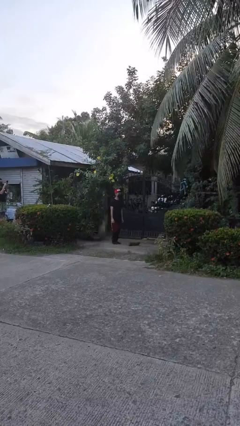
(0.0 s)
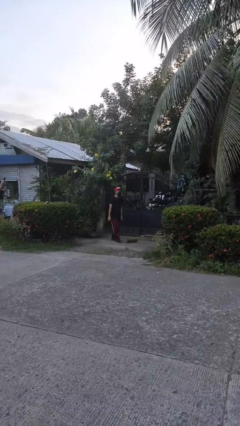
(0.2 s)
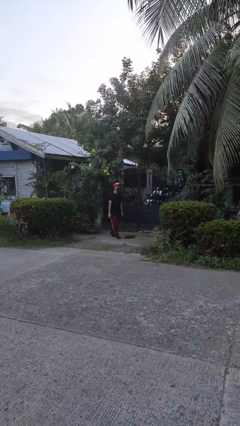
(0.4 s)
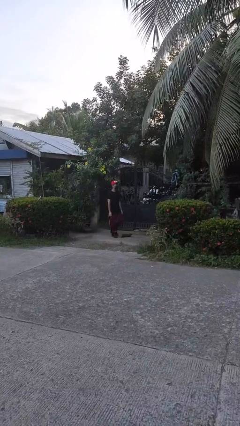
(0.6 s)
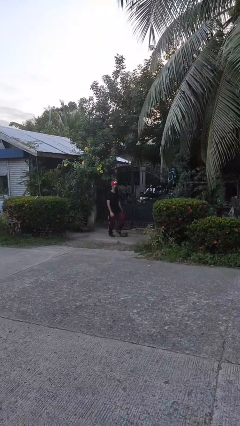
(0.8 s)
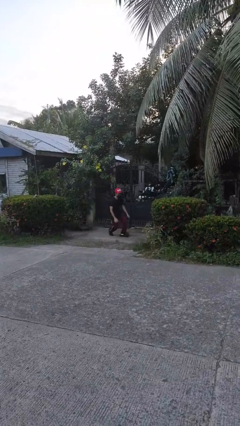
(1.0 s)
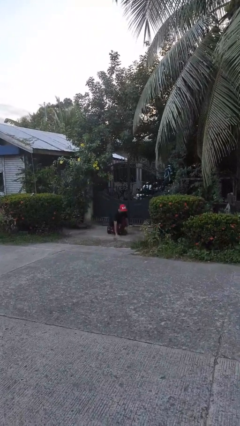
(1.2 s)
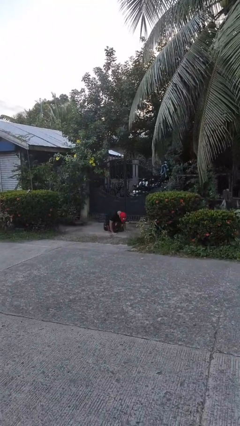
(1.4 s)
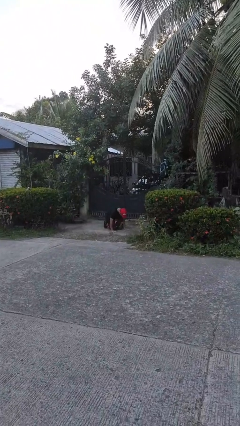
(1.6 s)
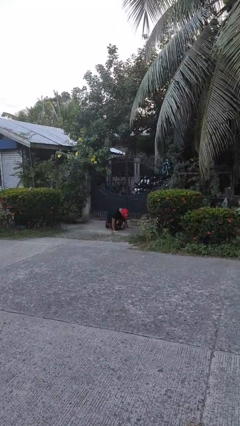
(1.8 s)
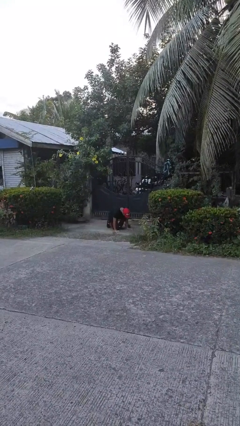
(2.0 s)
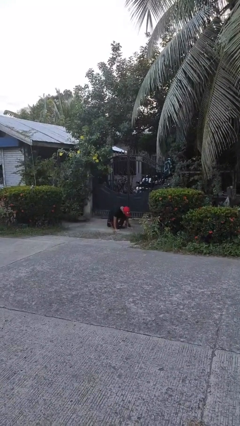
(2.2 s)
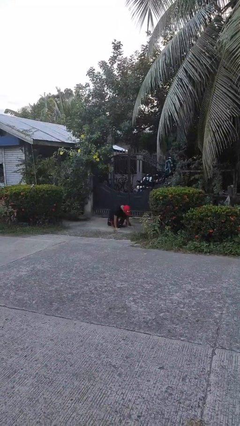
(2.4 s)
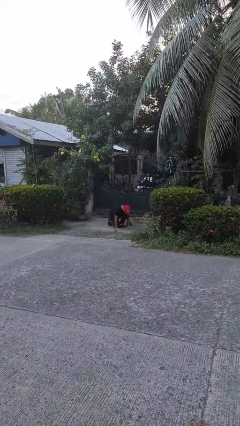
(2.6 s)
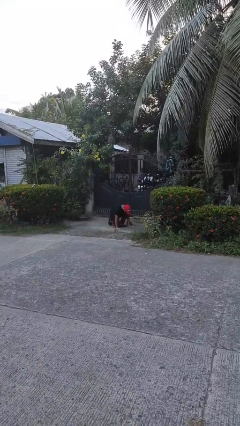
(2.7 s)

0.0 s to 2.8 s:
person trips on object on floor

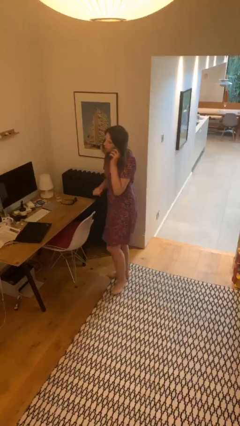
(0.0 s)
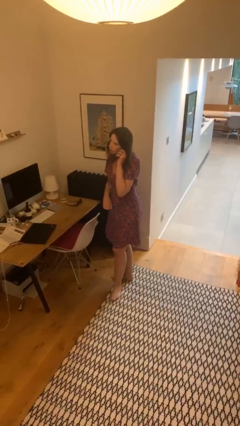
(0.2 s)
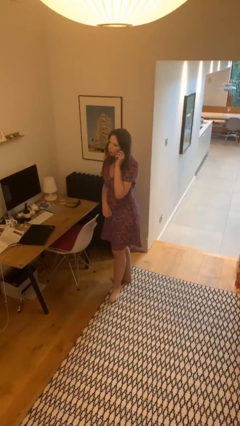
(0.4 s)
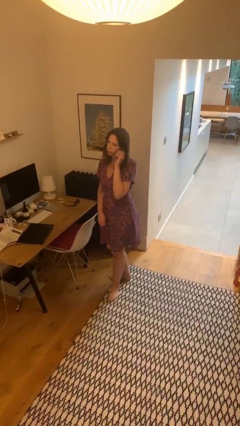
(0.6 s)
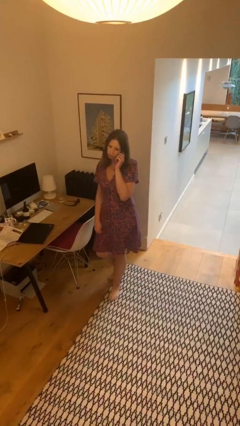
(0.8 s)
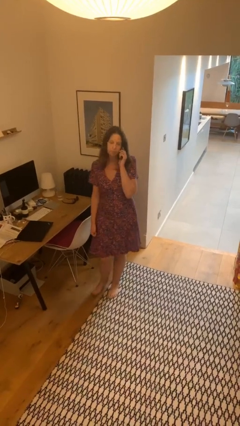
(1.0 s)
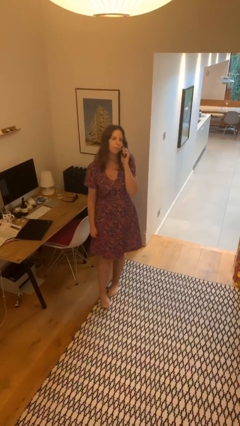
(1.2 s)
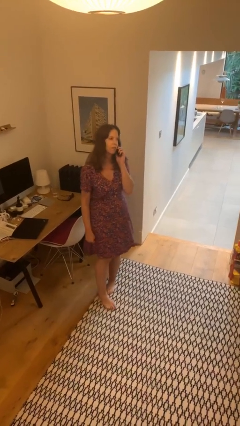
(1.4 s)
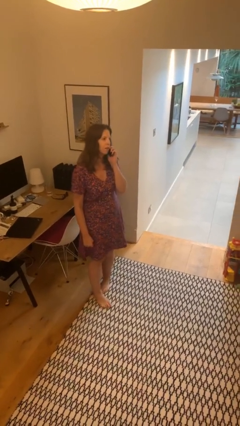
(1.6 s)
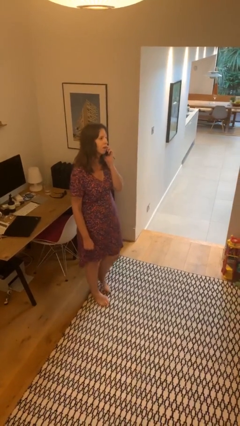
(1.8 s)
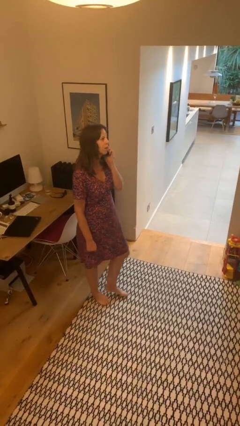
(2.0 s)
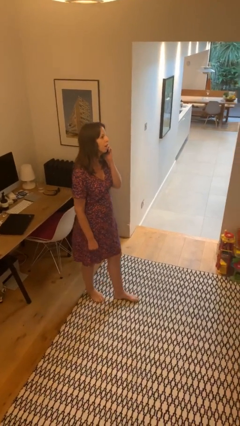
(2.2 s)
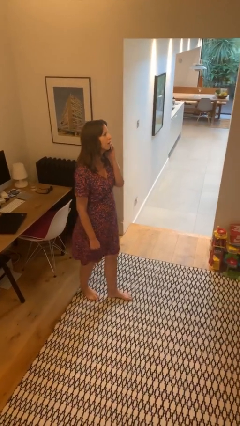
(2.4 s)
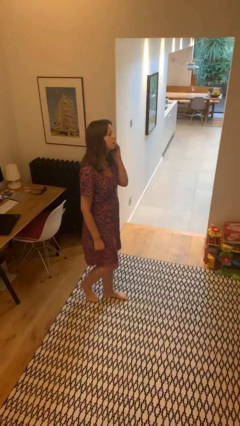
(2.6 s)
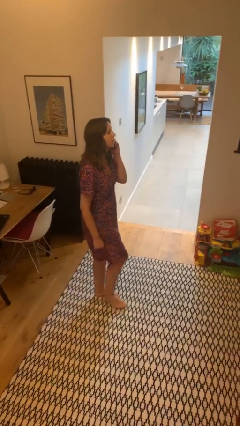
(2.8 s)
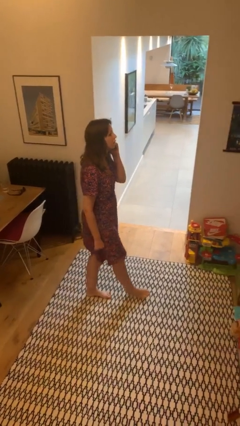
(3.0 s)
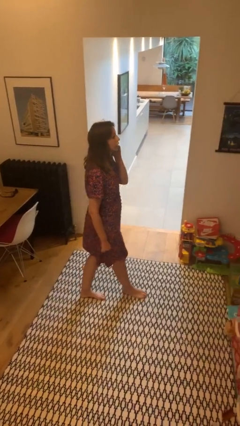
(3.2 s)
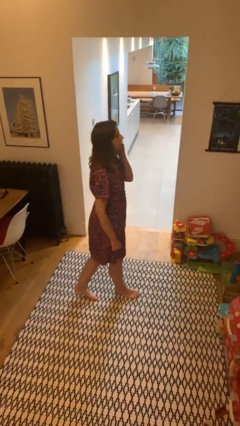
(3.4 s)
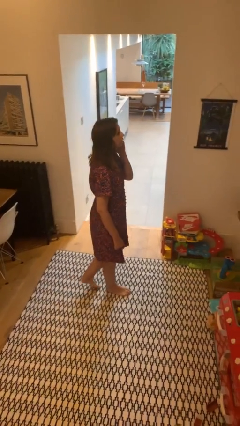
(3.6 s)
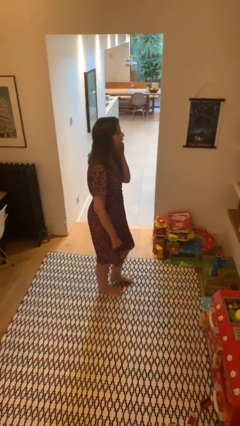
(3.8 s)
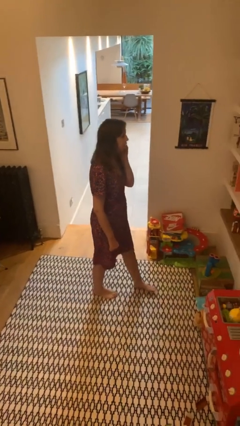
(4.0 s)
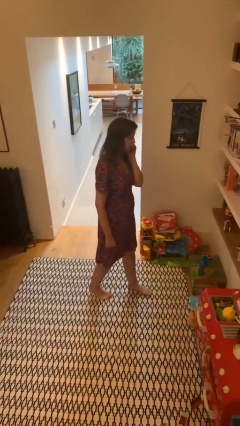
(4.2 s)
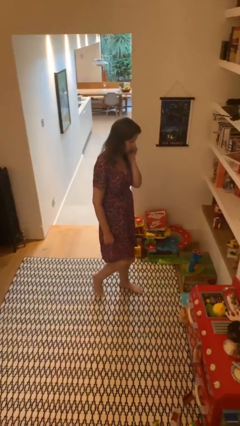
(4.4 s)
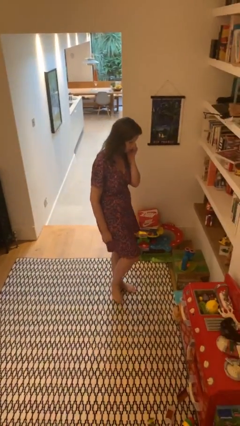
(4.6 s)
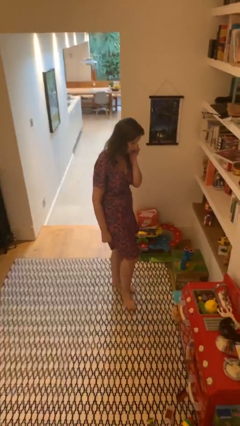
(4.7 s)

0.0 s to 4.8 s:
person talks on phone

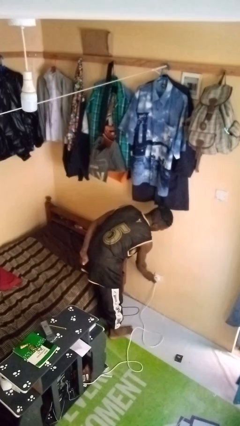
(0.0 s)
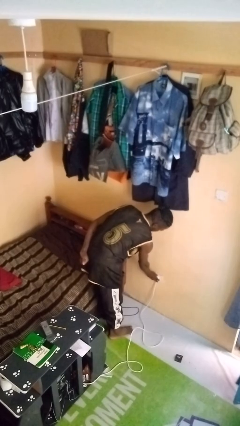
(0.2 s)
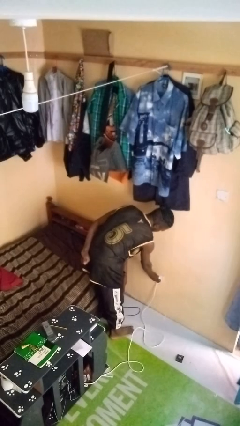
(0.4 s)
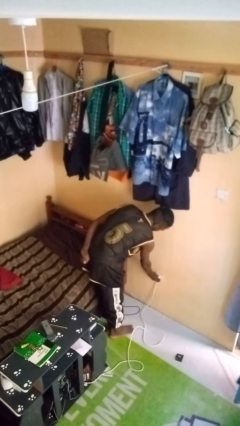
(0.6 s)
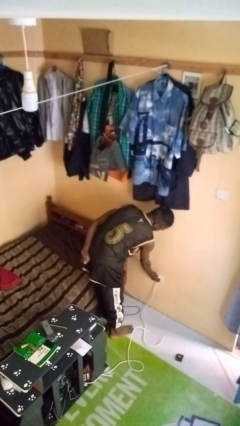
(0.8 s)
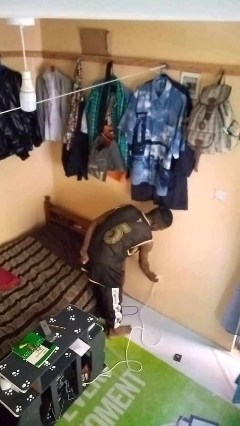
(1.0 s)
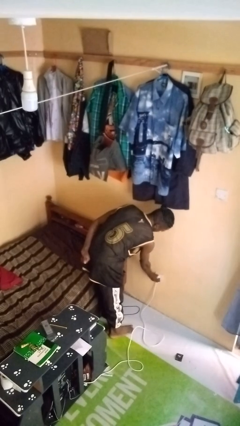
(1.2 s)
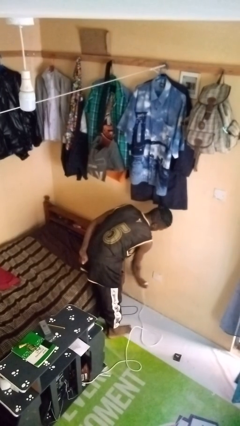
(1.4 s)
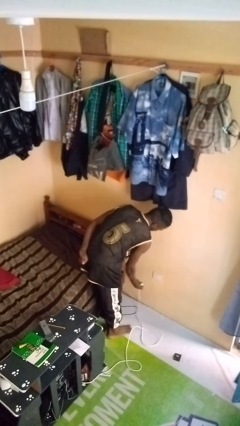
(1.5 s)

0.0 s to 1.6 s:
person unplugs from electrical socket

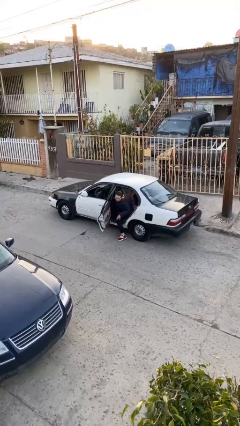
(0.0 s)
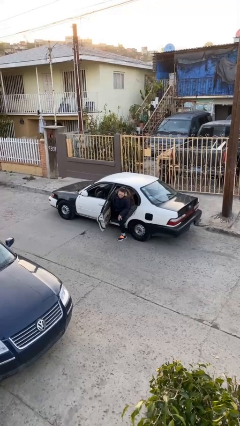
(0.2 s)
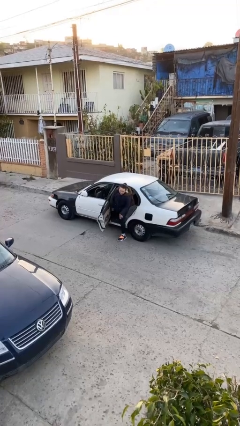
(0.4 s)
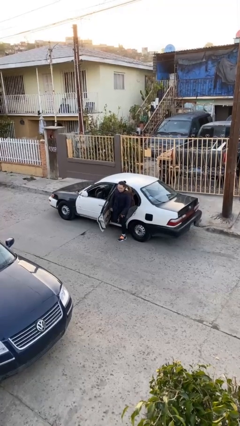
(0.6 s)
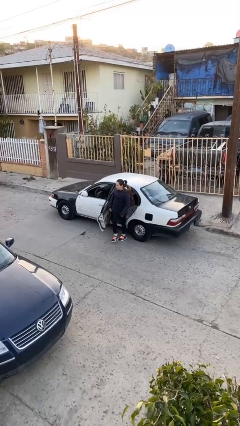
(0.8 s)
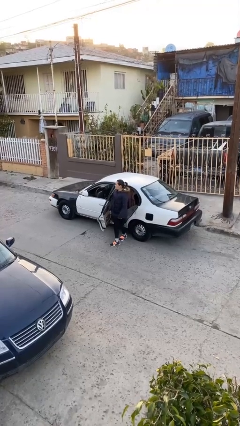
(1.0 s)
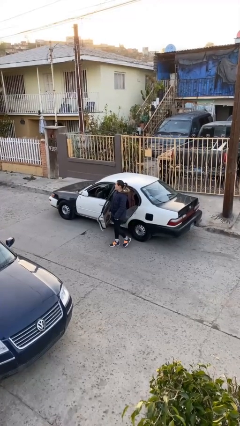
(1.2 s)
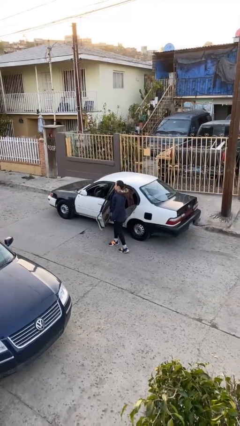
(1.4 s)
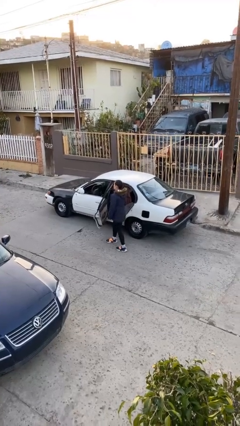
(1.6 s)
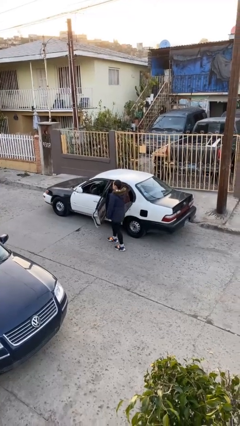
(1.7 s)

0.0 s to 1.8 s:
person exits car

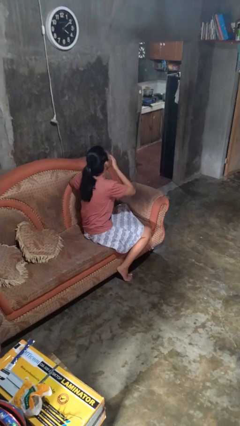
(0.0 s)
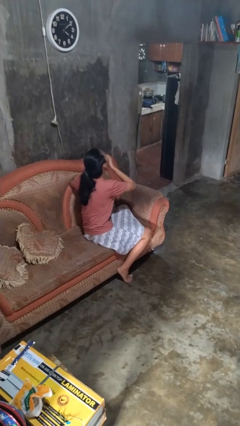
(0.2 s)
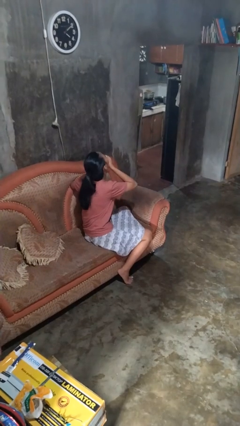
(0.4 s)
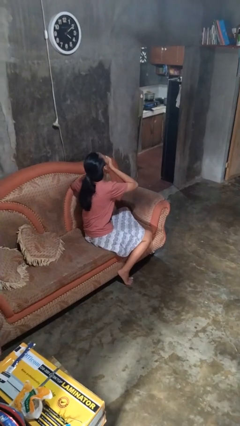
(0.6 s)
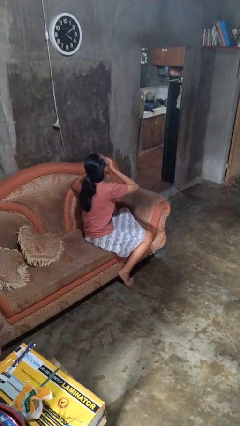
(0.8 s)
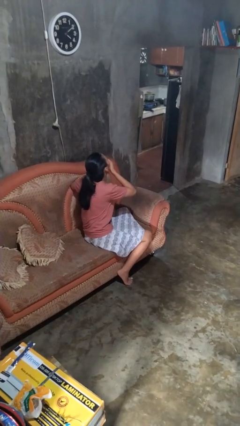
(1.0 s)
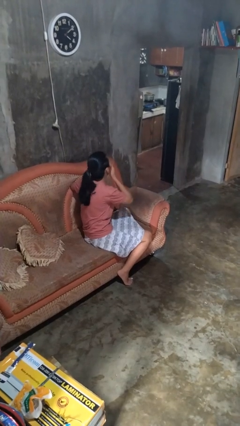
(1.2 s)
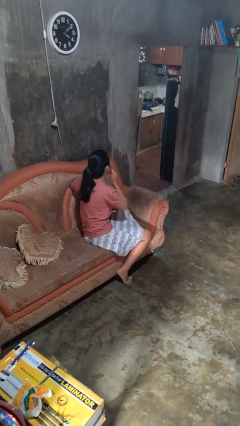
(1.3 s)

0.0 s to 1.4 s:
person yawns

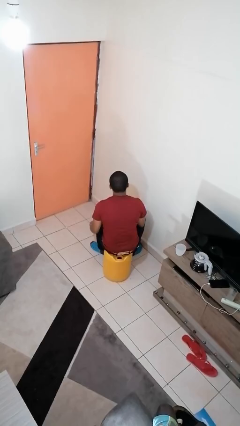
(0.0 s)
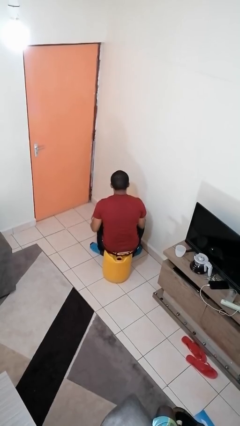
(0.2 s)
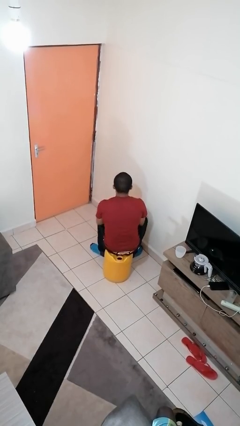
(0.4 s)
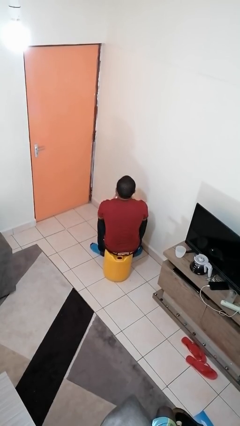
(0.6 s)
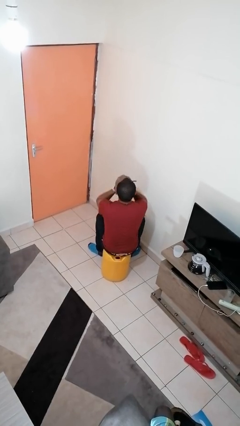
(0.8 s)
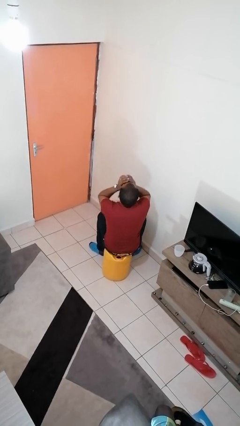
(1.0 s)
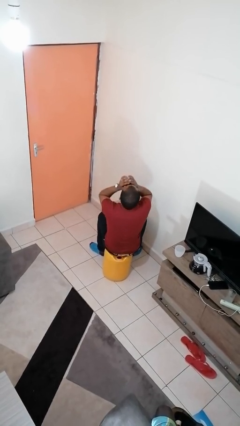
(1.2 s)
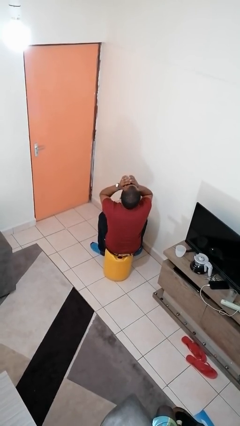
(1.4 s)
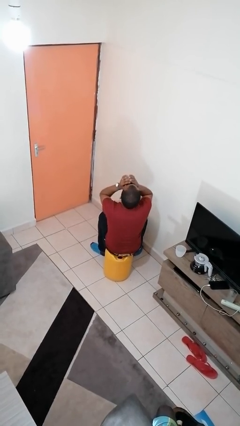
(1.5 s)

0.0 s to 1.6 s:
person drinks from mug

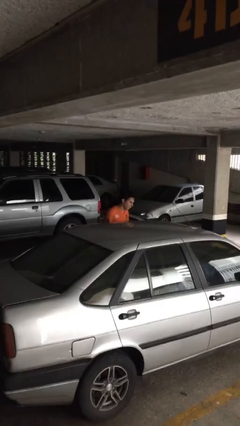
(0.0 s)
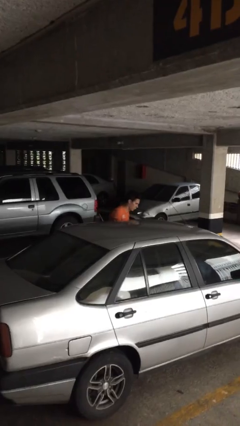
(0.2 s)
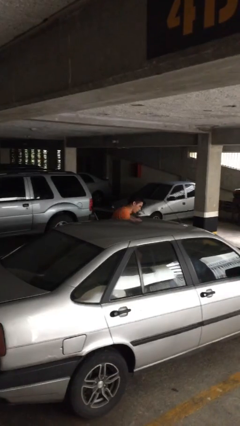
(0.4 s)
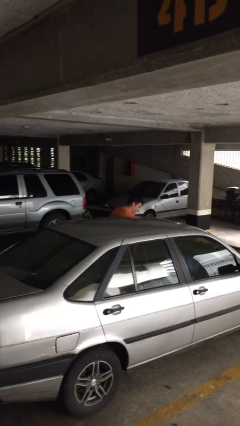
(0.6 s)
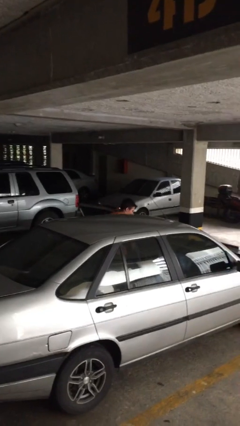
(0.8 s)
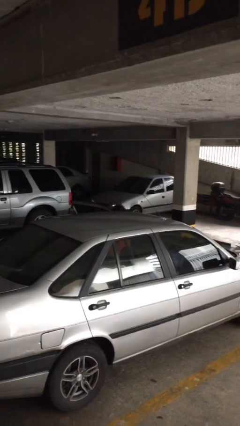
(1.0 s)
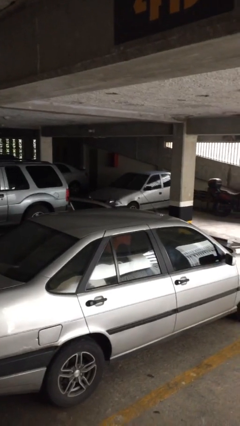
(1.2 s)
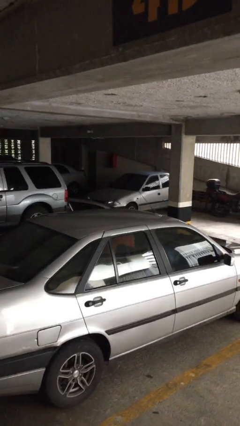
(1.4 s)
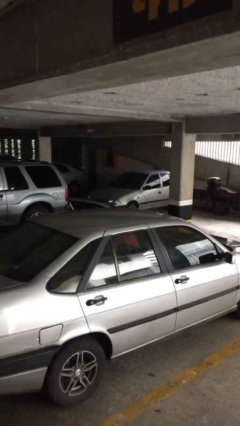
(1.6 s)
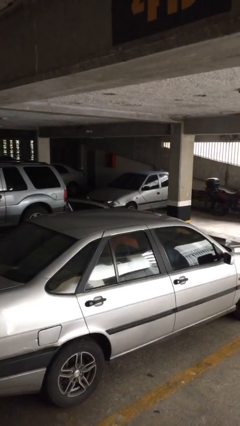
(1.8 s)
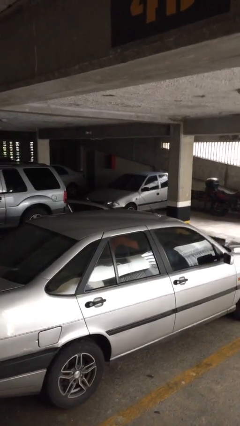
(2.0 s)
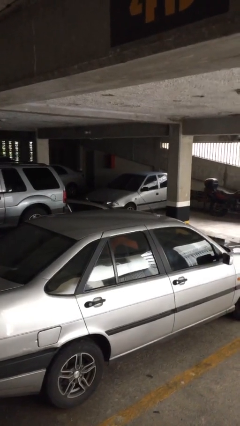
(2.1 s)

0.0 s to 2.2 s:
person enters scene through structure

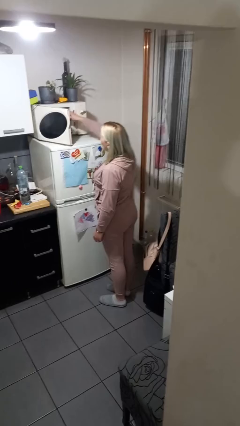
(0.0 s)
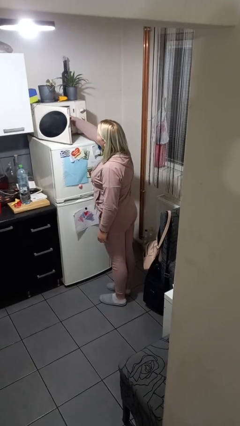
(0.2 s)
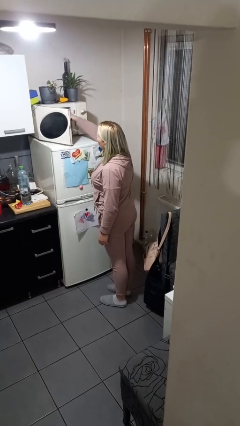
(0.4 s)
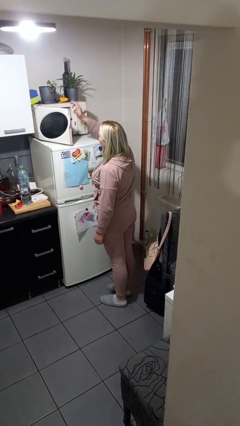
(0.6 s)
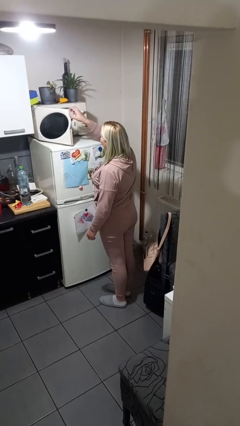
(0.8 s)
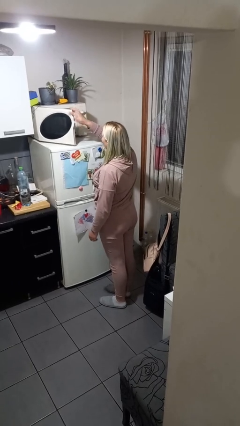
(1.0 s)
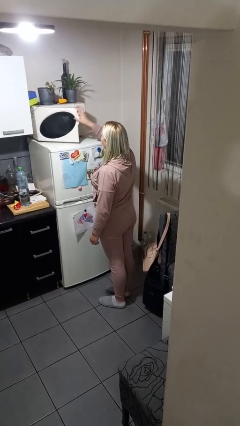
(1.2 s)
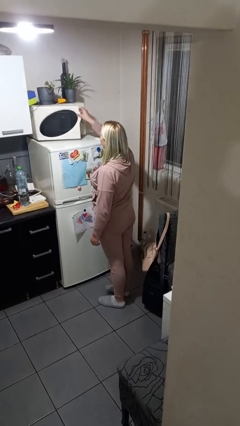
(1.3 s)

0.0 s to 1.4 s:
person puts object into microwave
